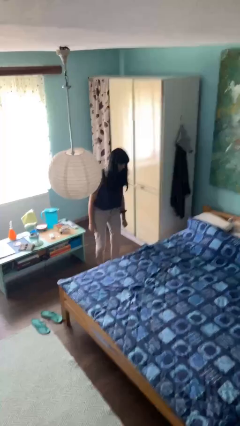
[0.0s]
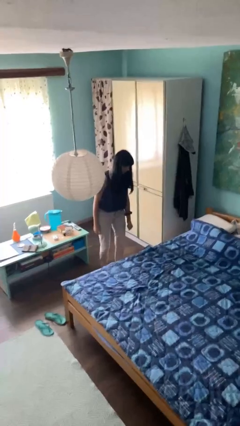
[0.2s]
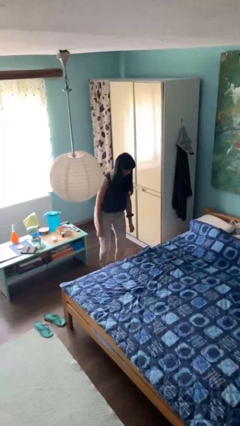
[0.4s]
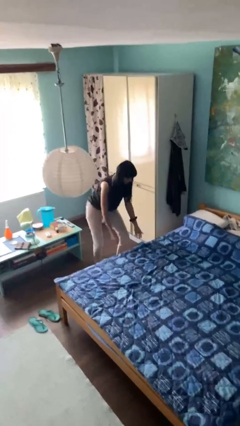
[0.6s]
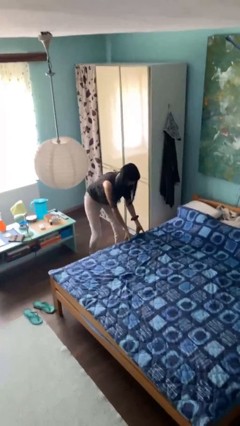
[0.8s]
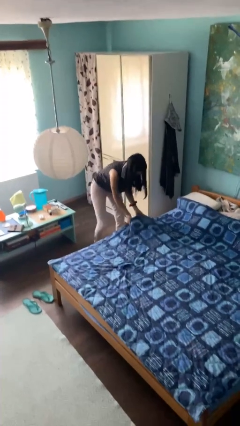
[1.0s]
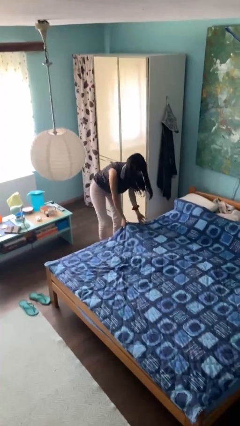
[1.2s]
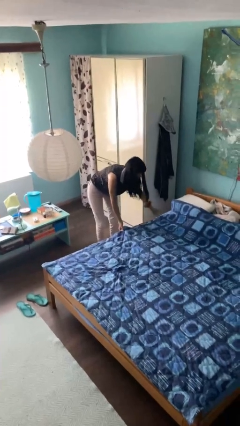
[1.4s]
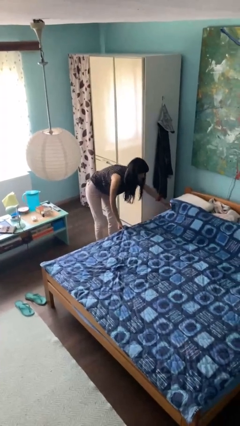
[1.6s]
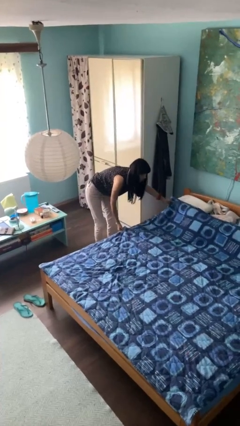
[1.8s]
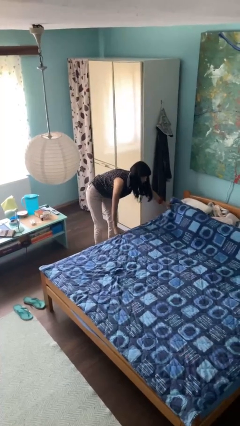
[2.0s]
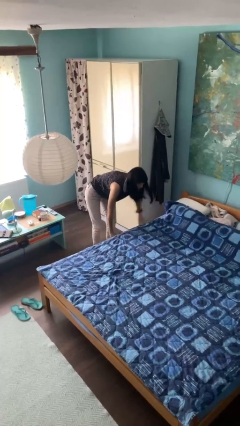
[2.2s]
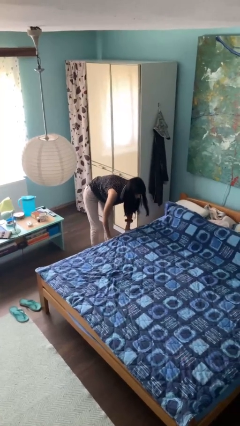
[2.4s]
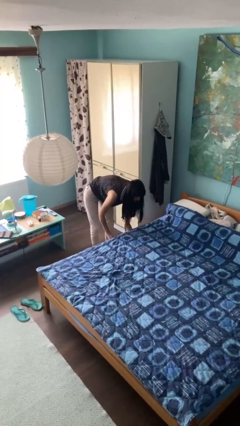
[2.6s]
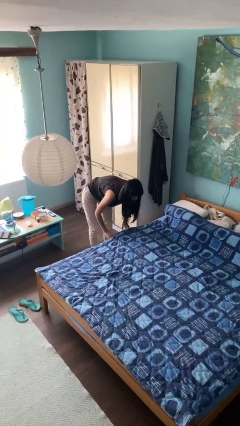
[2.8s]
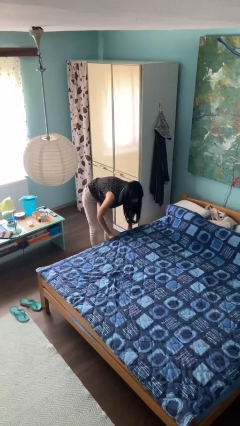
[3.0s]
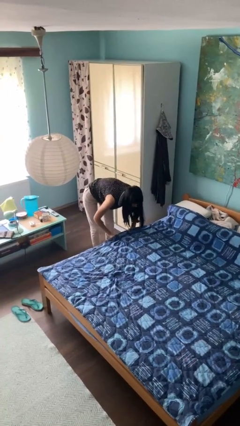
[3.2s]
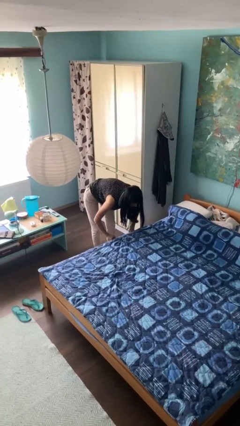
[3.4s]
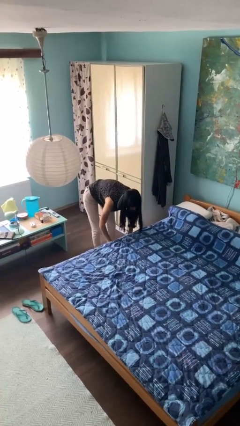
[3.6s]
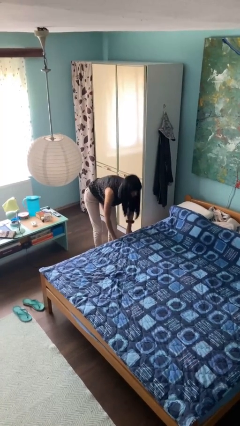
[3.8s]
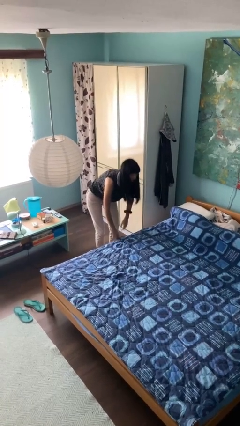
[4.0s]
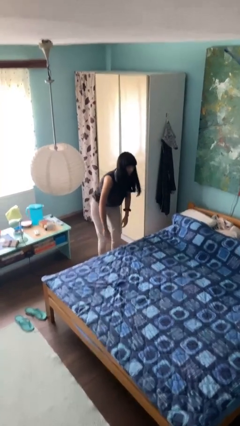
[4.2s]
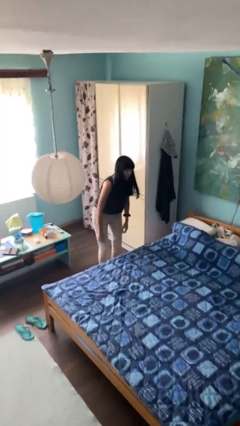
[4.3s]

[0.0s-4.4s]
person makes bed

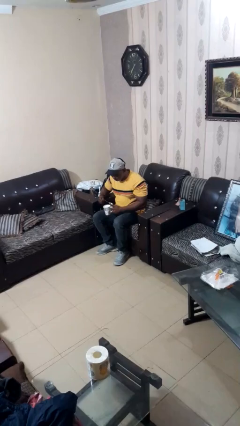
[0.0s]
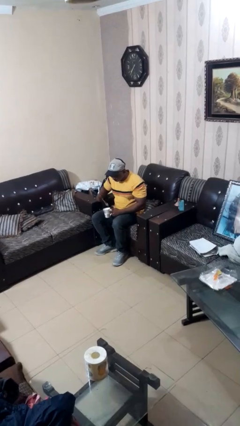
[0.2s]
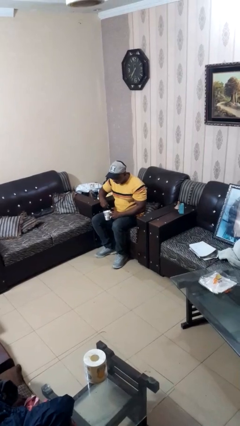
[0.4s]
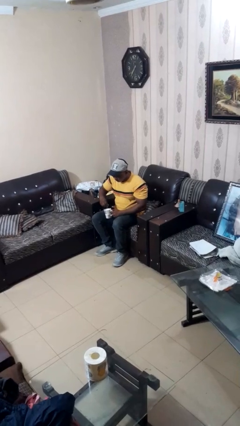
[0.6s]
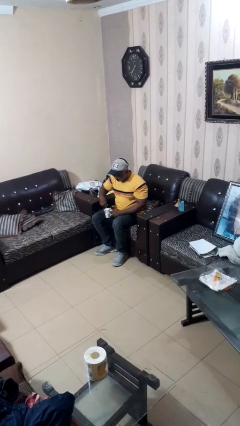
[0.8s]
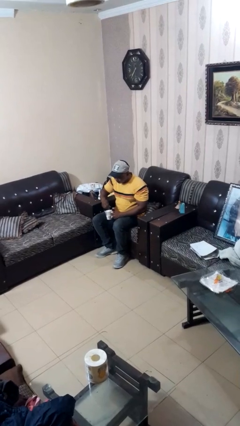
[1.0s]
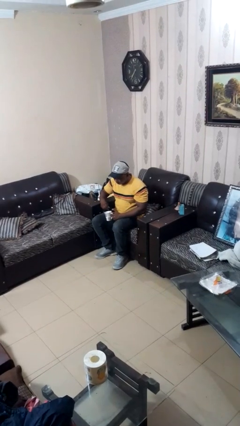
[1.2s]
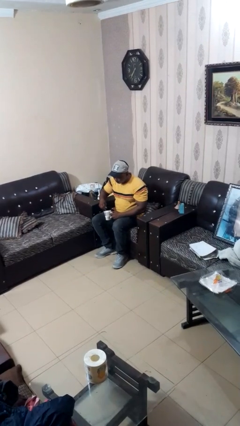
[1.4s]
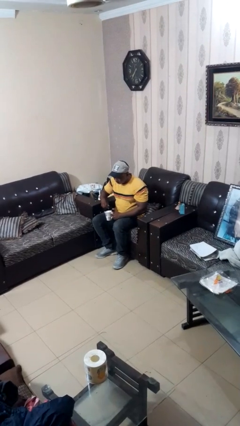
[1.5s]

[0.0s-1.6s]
person stirs mug

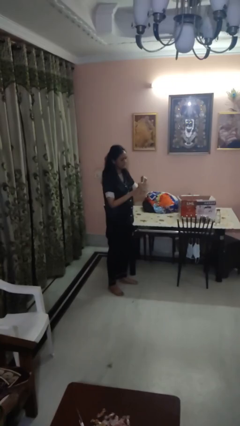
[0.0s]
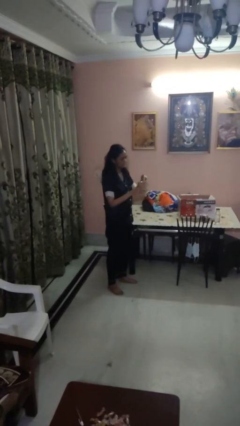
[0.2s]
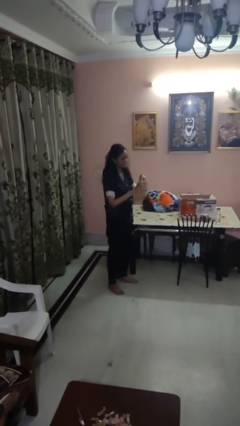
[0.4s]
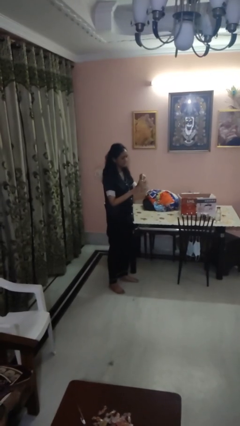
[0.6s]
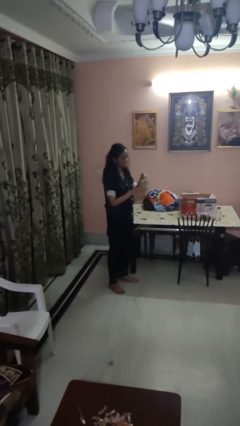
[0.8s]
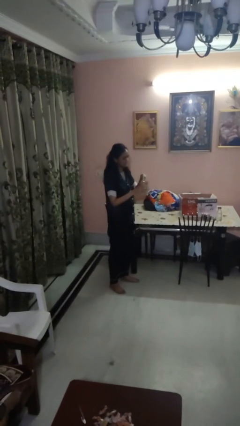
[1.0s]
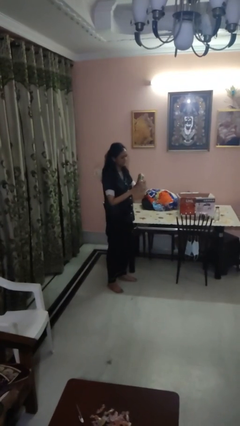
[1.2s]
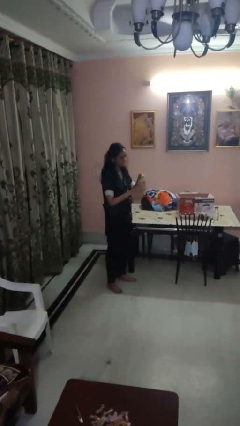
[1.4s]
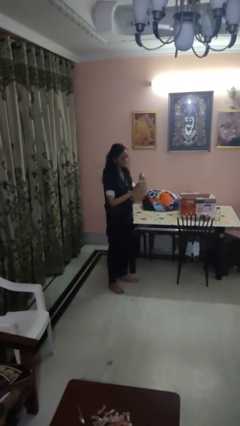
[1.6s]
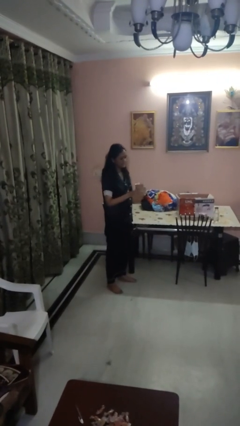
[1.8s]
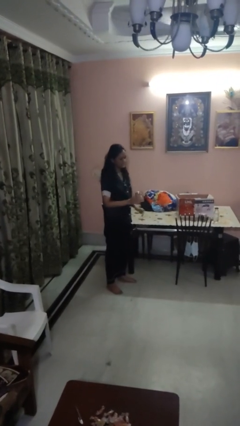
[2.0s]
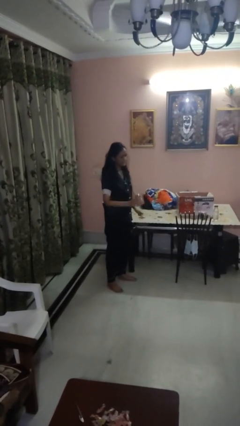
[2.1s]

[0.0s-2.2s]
person opens can with can opener

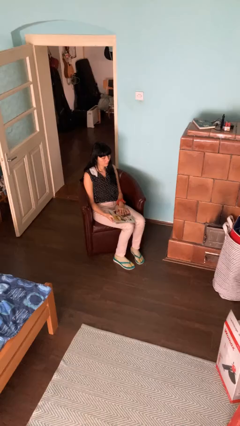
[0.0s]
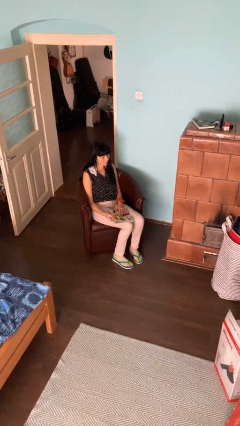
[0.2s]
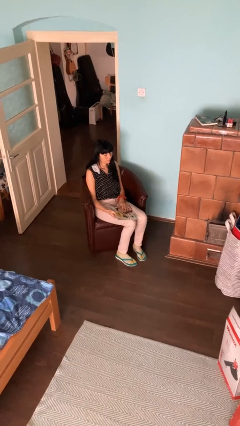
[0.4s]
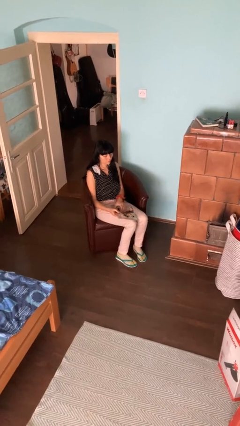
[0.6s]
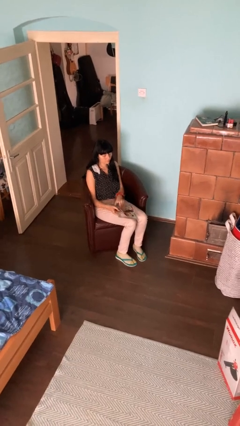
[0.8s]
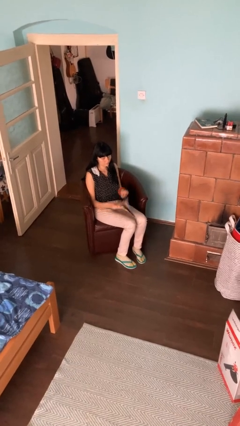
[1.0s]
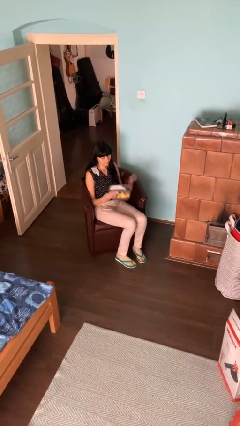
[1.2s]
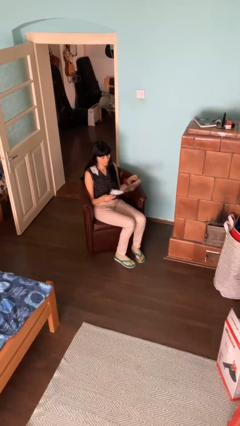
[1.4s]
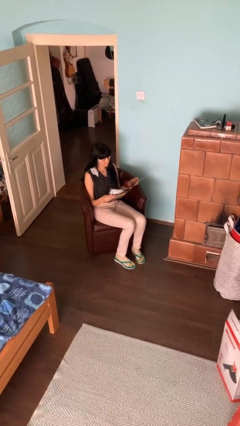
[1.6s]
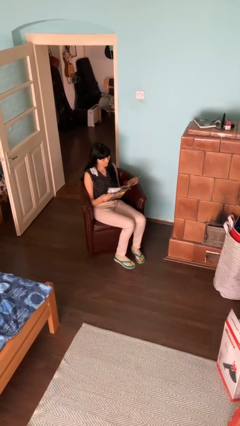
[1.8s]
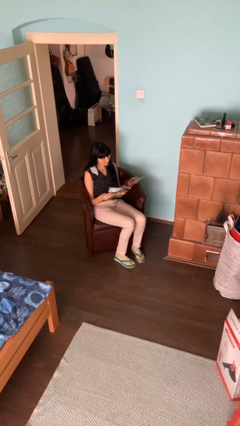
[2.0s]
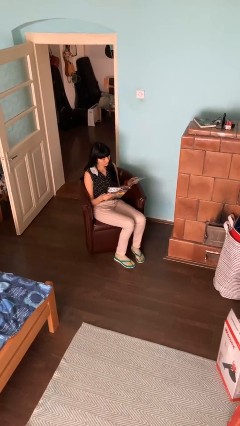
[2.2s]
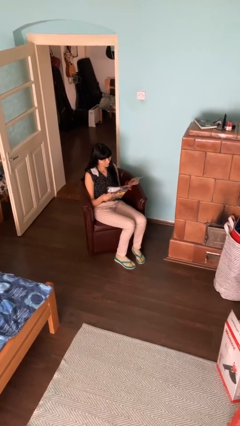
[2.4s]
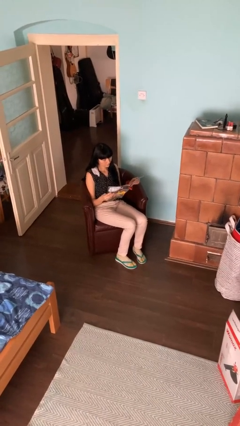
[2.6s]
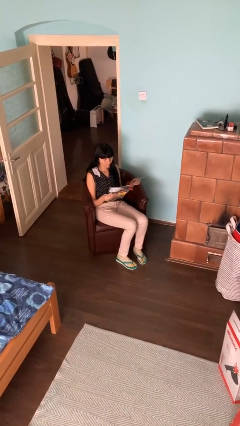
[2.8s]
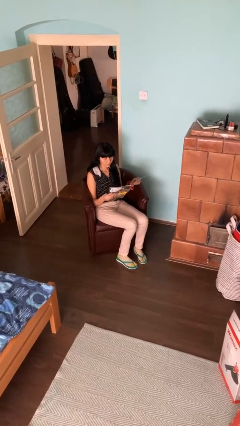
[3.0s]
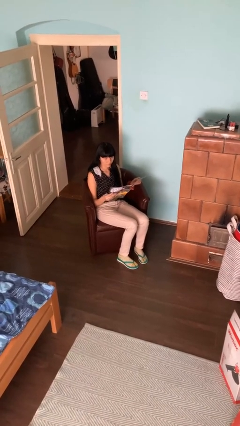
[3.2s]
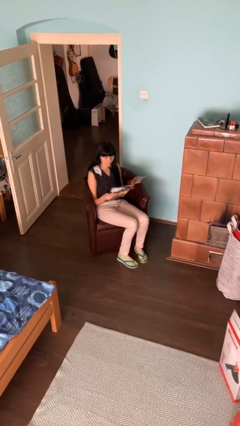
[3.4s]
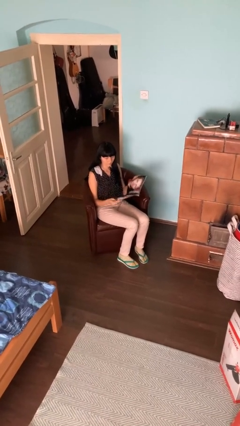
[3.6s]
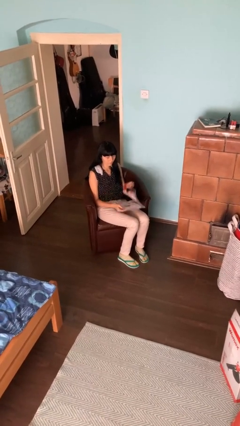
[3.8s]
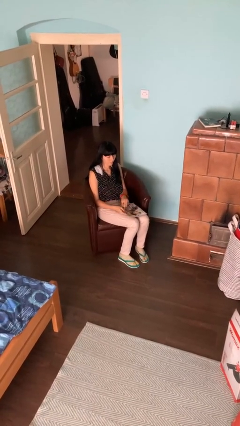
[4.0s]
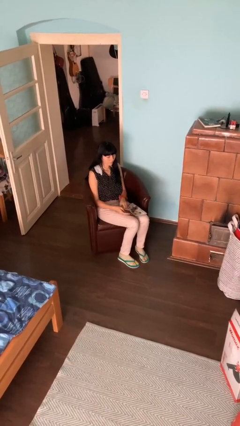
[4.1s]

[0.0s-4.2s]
person reads magazine

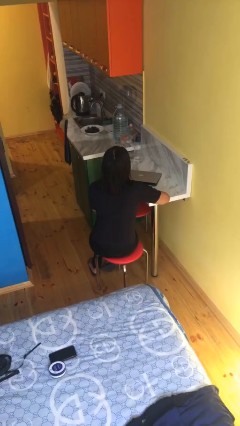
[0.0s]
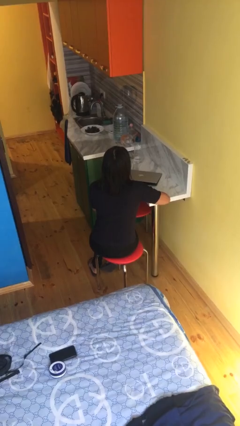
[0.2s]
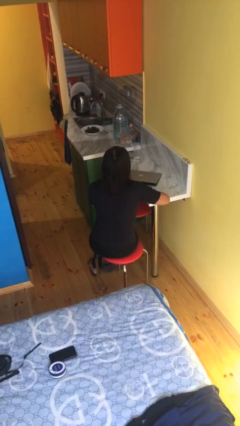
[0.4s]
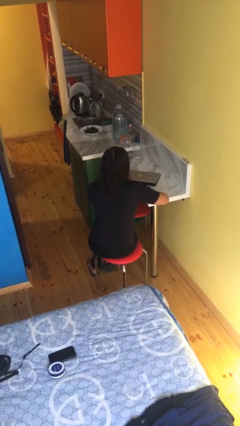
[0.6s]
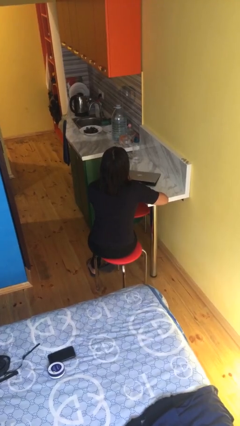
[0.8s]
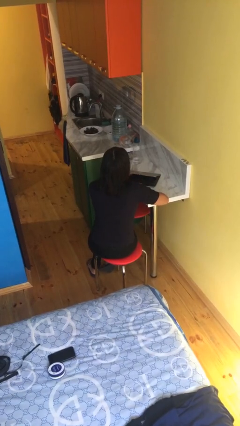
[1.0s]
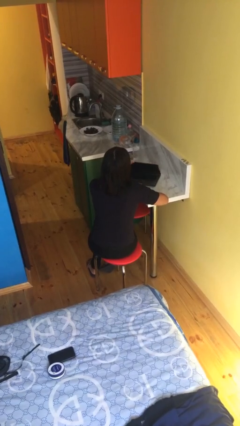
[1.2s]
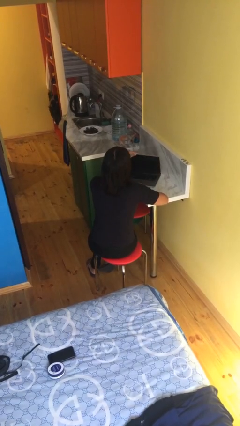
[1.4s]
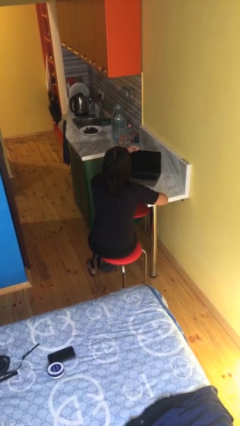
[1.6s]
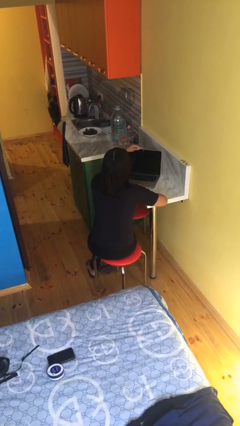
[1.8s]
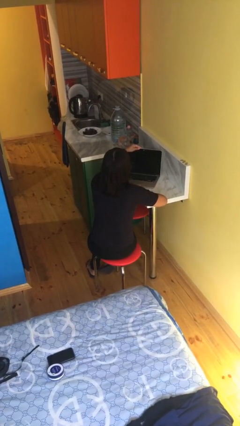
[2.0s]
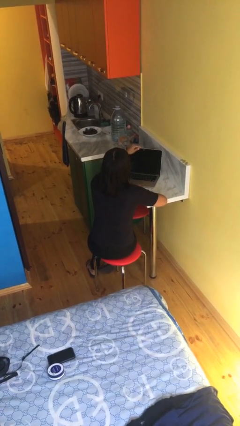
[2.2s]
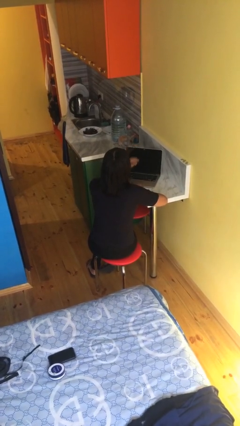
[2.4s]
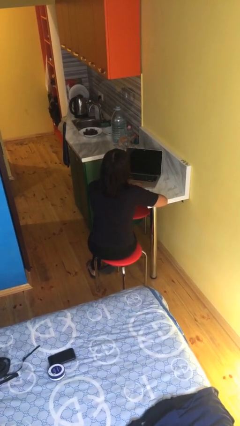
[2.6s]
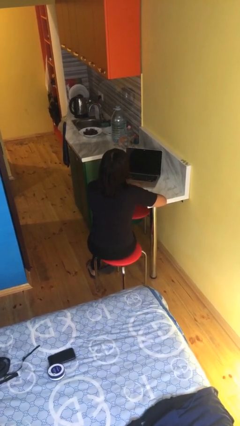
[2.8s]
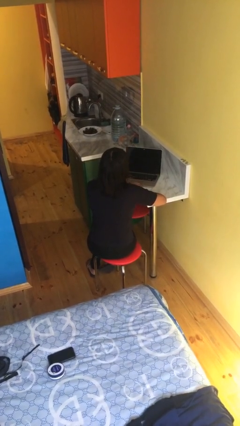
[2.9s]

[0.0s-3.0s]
person opens laptop

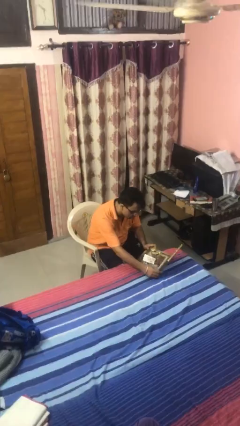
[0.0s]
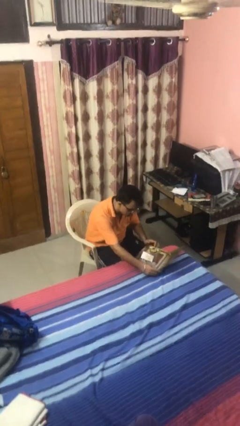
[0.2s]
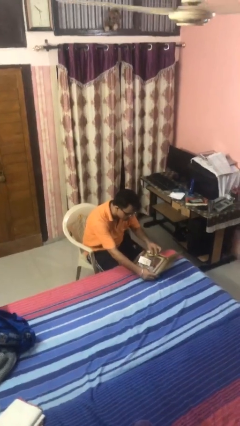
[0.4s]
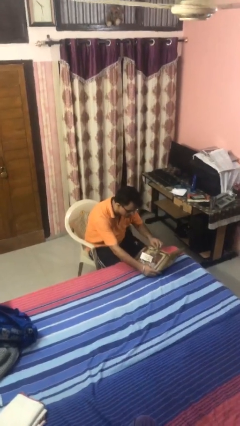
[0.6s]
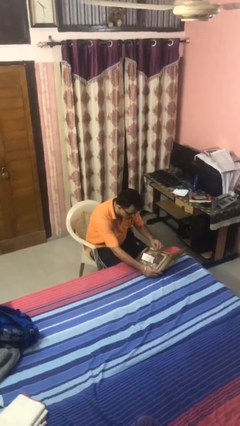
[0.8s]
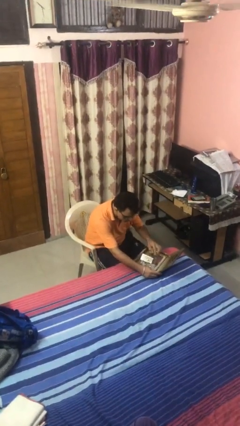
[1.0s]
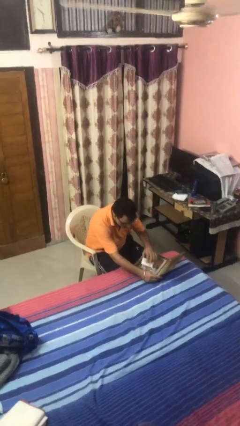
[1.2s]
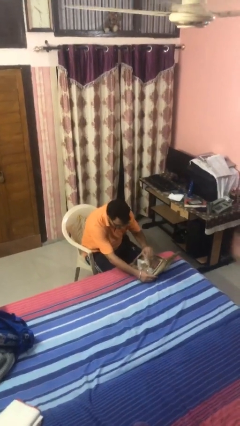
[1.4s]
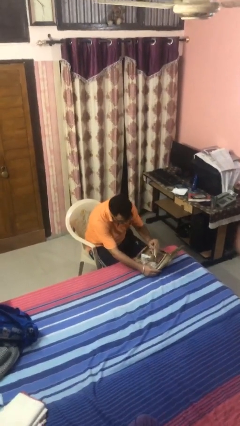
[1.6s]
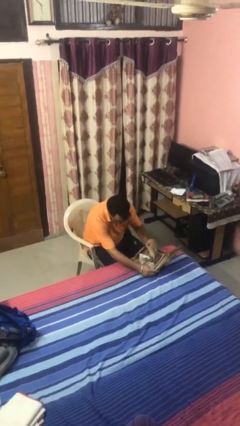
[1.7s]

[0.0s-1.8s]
person searches jewelry box

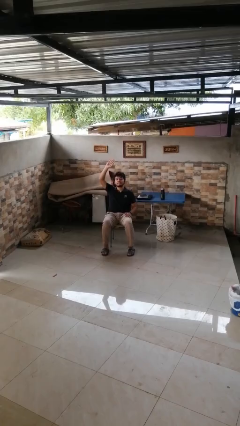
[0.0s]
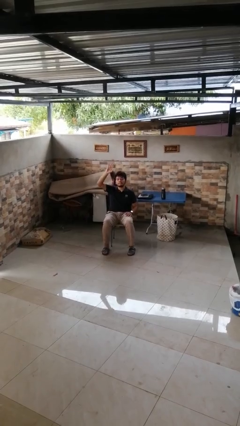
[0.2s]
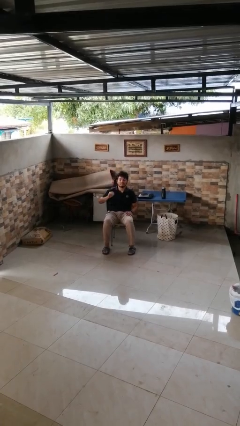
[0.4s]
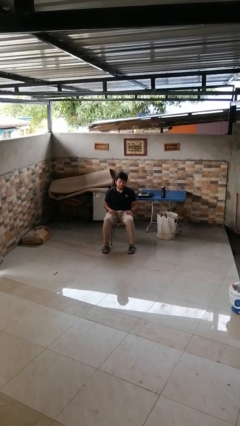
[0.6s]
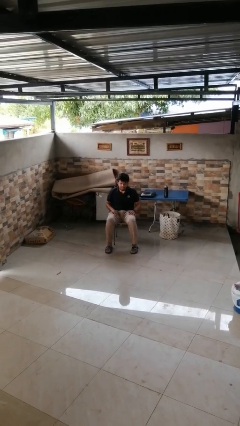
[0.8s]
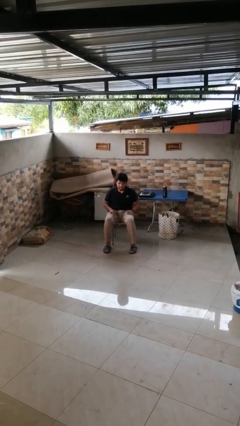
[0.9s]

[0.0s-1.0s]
person gestures lower hand
